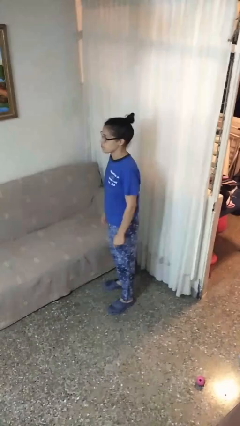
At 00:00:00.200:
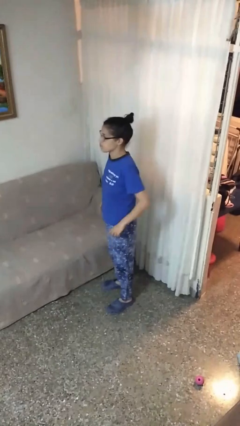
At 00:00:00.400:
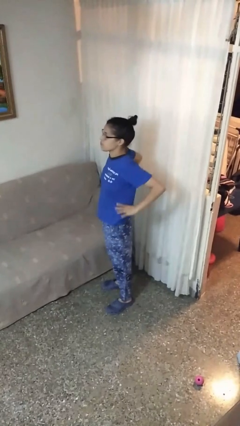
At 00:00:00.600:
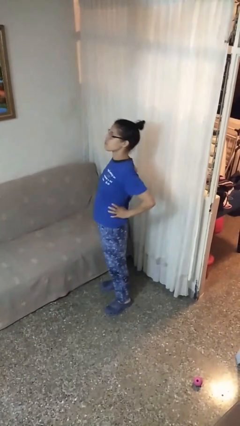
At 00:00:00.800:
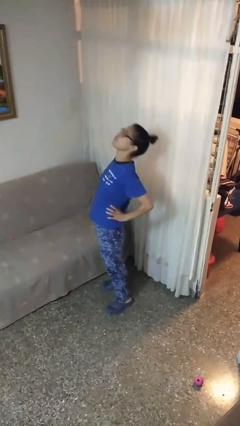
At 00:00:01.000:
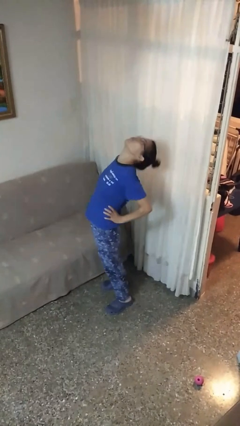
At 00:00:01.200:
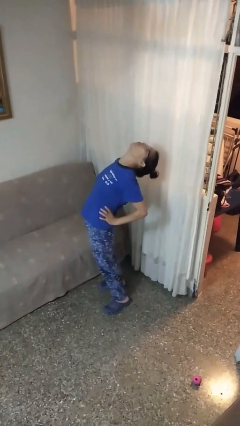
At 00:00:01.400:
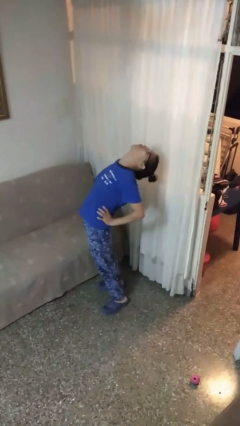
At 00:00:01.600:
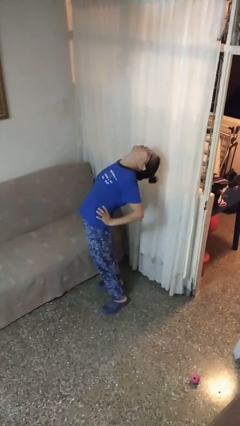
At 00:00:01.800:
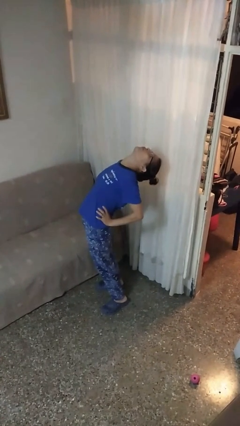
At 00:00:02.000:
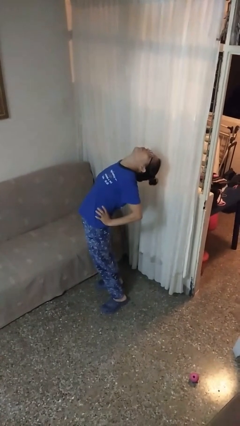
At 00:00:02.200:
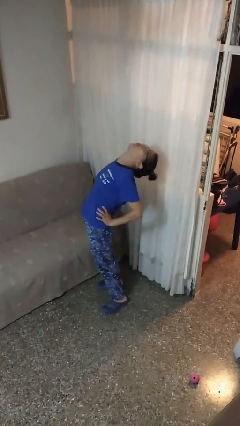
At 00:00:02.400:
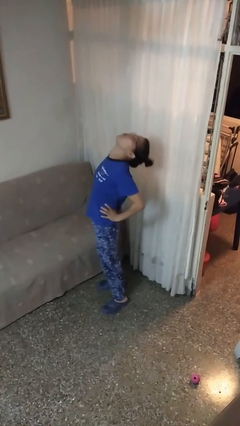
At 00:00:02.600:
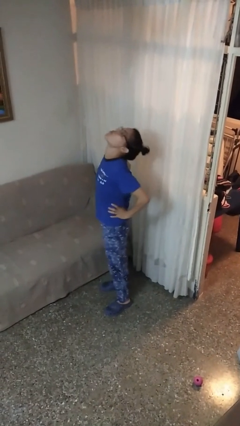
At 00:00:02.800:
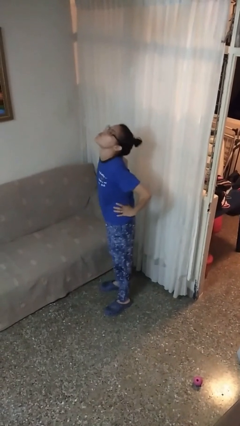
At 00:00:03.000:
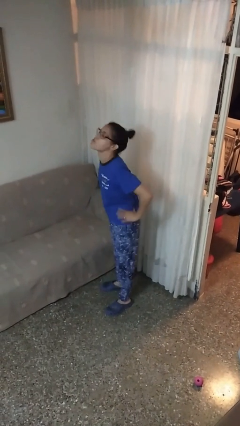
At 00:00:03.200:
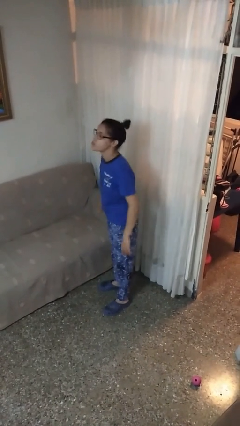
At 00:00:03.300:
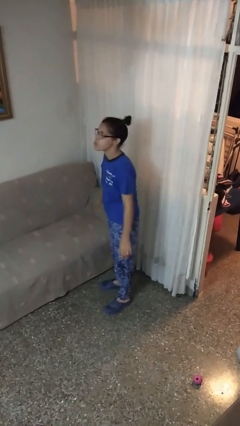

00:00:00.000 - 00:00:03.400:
person stretches back

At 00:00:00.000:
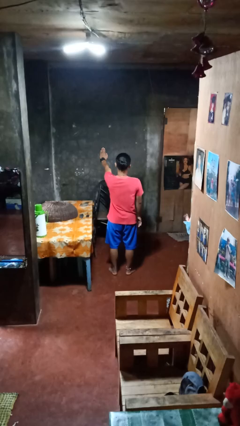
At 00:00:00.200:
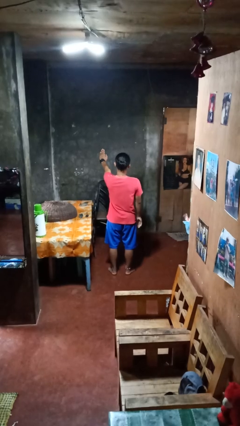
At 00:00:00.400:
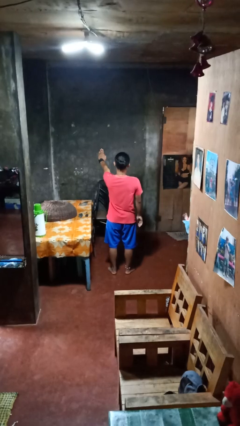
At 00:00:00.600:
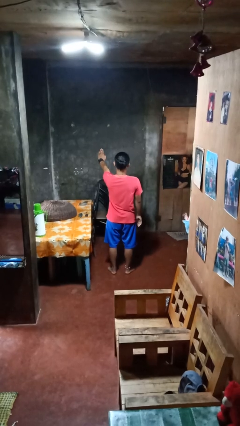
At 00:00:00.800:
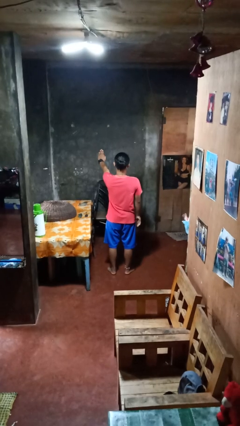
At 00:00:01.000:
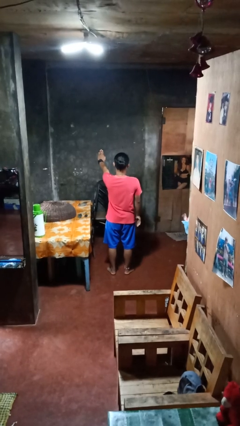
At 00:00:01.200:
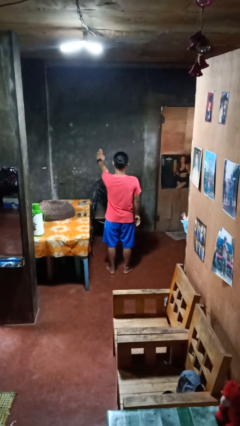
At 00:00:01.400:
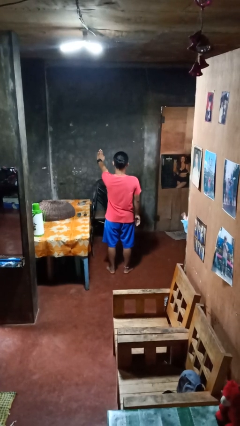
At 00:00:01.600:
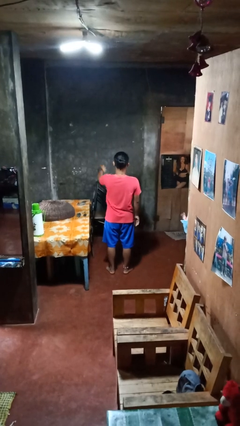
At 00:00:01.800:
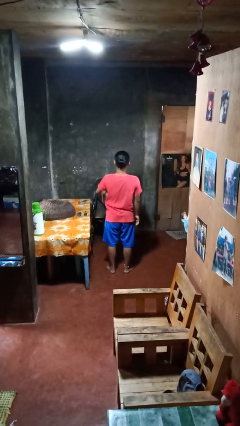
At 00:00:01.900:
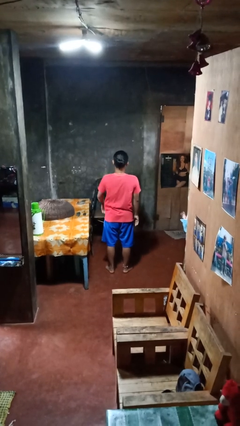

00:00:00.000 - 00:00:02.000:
person gestures stop

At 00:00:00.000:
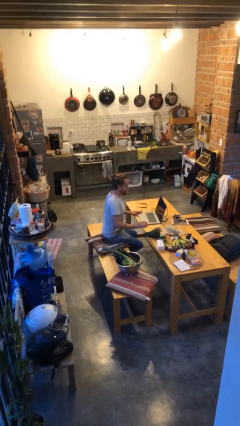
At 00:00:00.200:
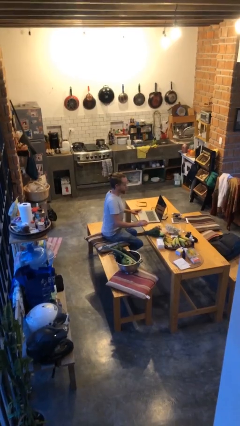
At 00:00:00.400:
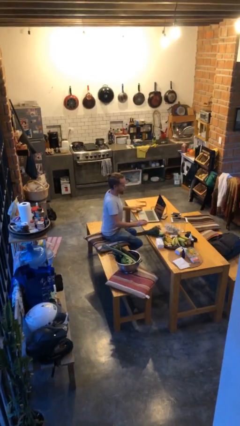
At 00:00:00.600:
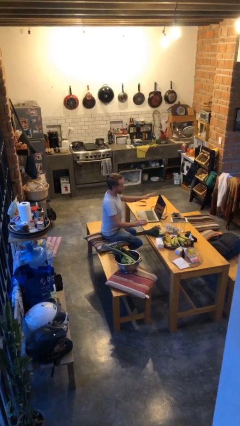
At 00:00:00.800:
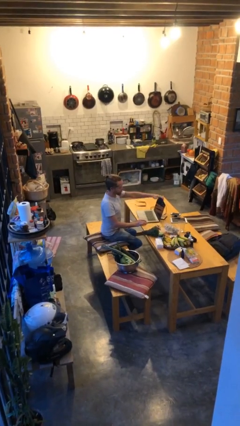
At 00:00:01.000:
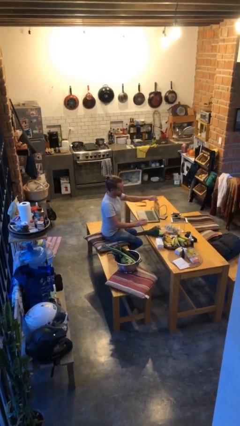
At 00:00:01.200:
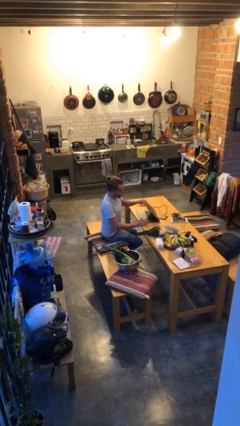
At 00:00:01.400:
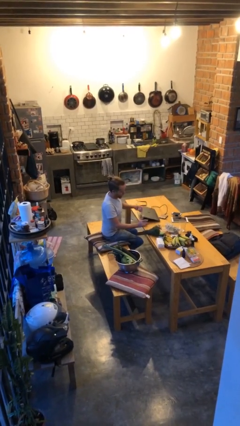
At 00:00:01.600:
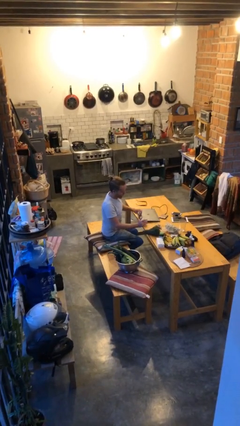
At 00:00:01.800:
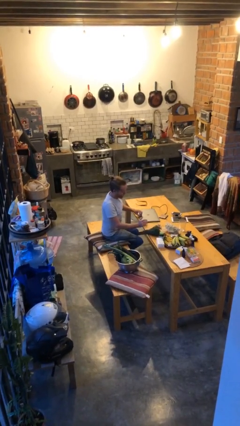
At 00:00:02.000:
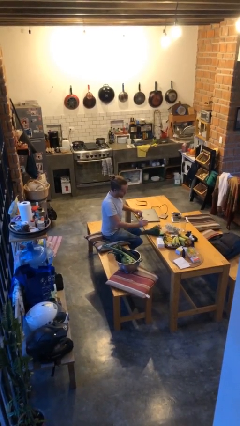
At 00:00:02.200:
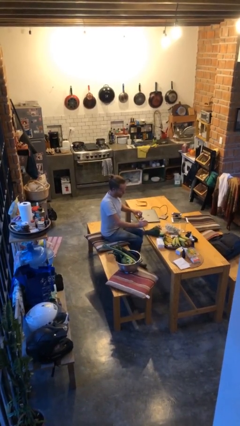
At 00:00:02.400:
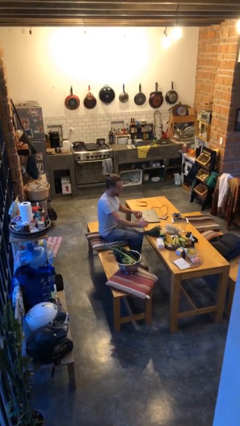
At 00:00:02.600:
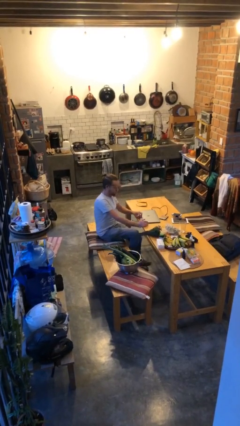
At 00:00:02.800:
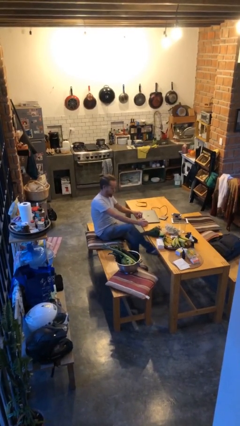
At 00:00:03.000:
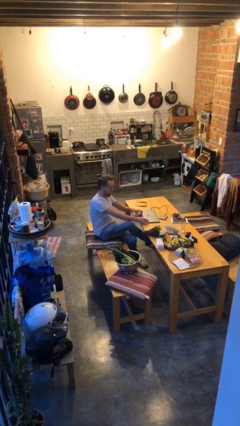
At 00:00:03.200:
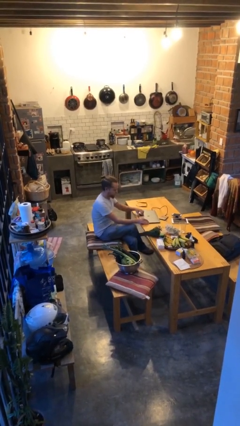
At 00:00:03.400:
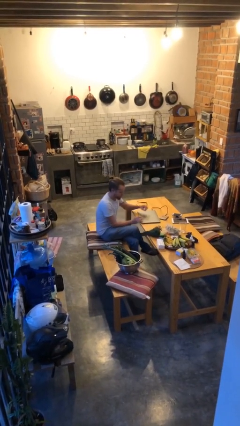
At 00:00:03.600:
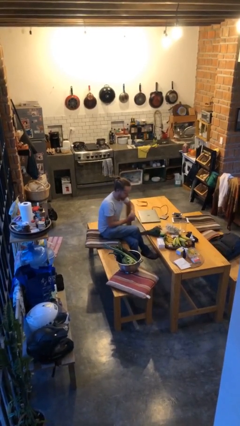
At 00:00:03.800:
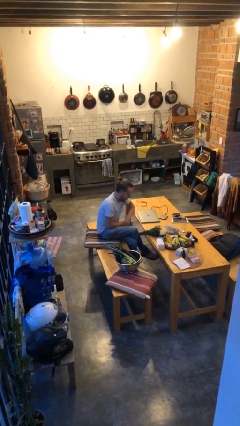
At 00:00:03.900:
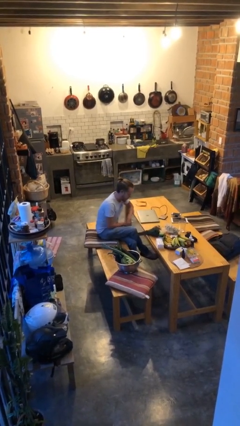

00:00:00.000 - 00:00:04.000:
person closes laptop

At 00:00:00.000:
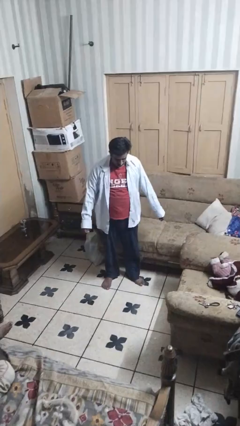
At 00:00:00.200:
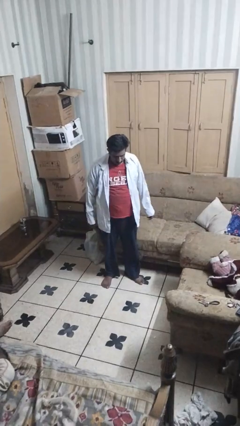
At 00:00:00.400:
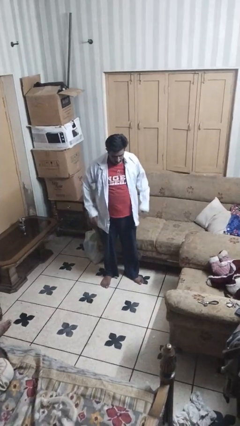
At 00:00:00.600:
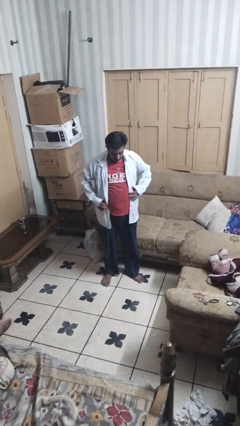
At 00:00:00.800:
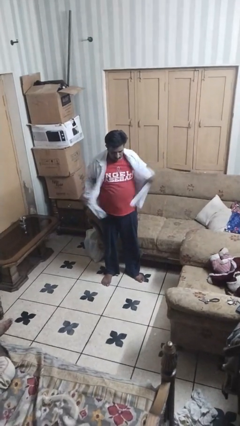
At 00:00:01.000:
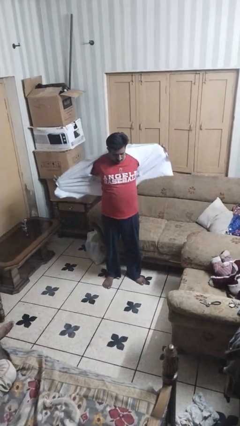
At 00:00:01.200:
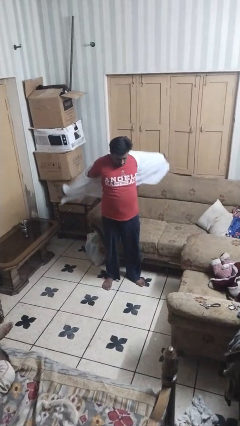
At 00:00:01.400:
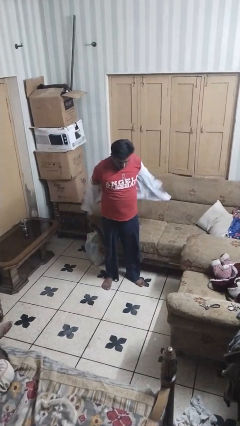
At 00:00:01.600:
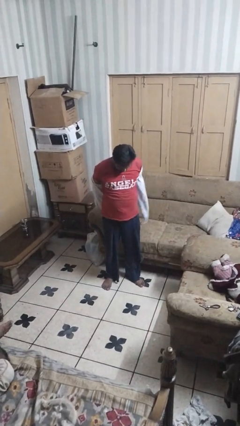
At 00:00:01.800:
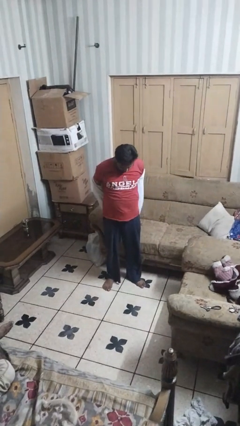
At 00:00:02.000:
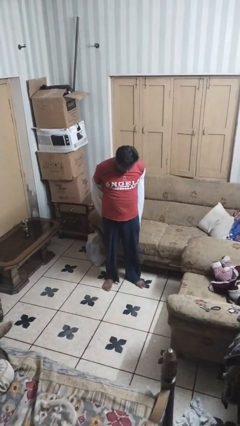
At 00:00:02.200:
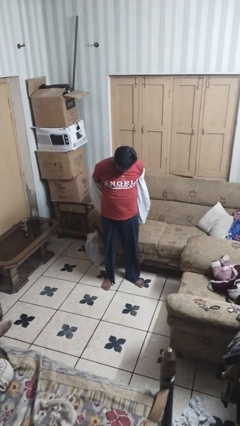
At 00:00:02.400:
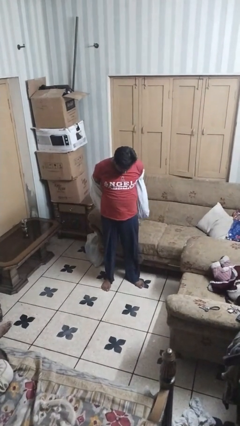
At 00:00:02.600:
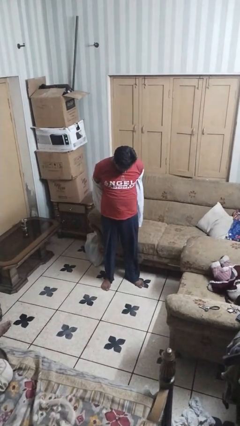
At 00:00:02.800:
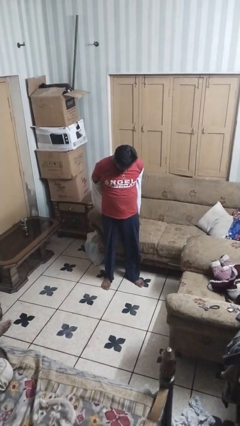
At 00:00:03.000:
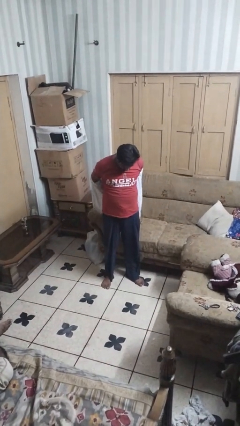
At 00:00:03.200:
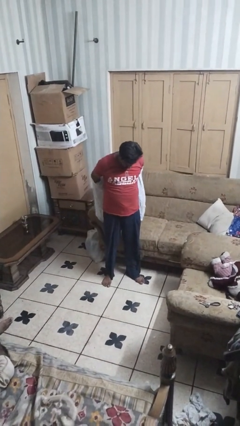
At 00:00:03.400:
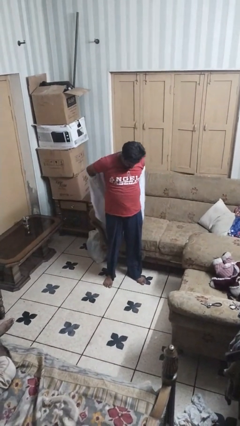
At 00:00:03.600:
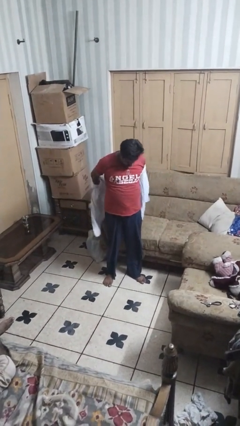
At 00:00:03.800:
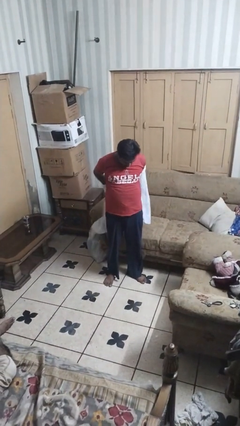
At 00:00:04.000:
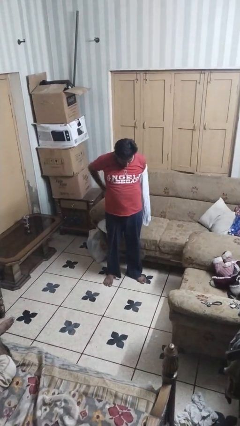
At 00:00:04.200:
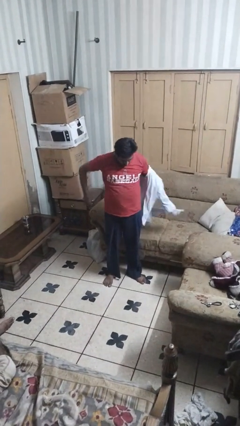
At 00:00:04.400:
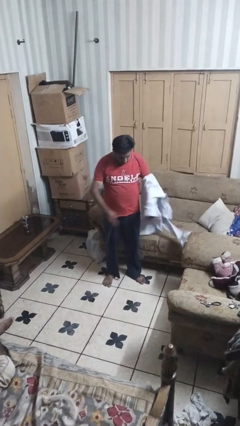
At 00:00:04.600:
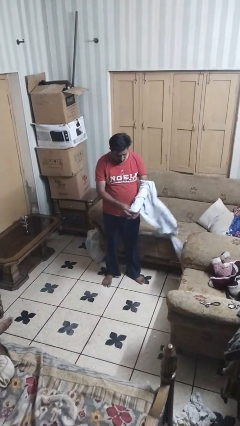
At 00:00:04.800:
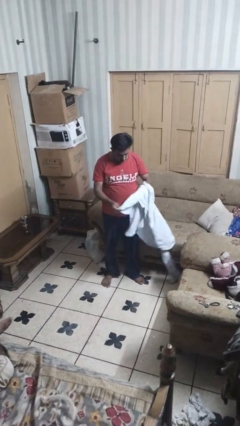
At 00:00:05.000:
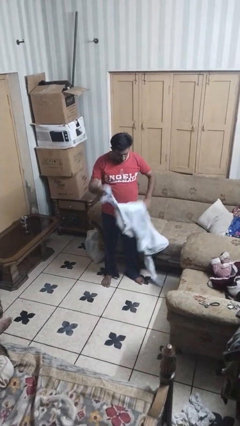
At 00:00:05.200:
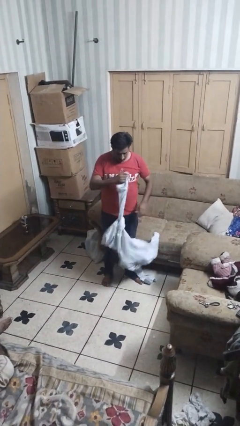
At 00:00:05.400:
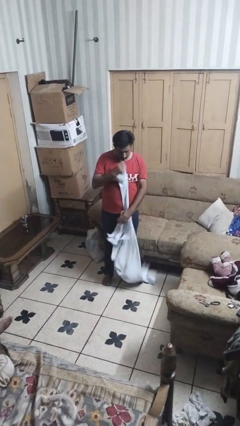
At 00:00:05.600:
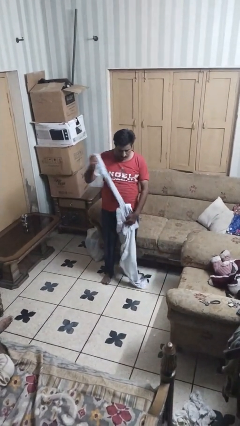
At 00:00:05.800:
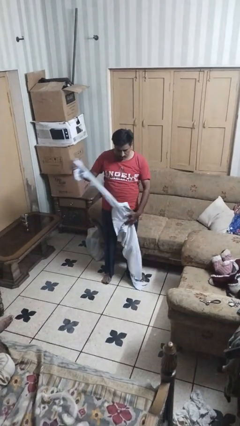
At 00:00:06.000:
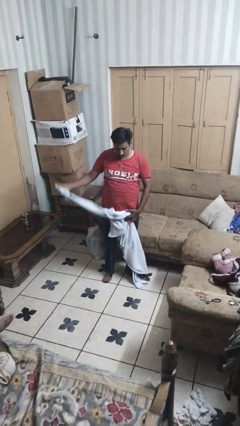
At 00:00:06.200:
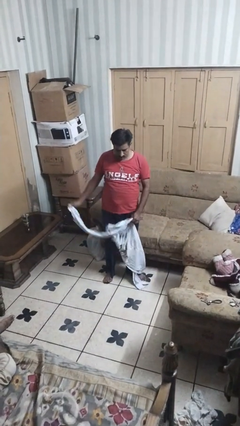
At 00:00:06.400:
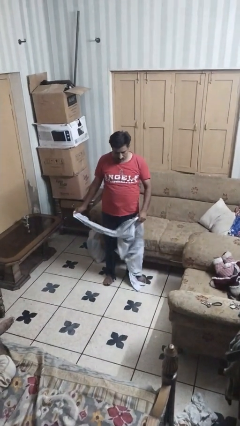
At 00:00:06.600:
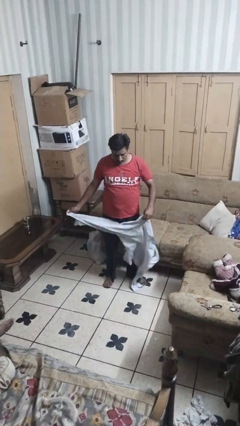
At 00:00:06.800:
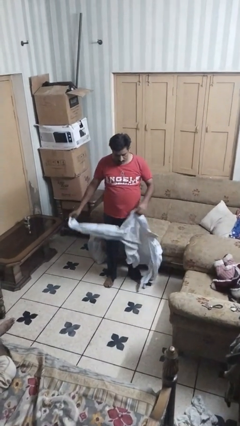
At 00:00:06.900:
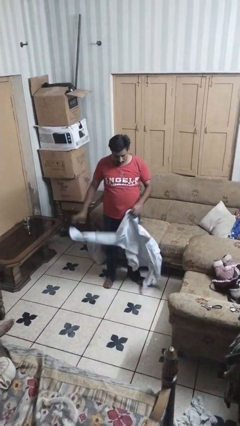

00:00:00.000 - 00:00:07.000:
person takes off shirt

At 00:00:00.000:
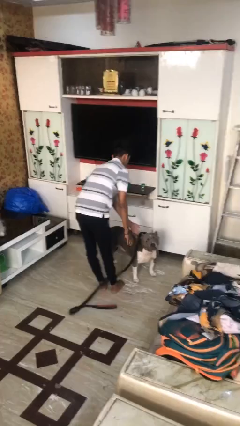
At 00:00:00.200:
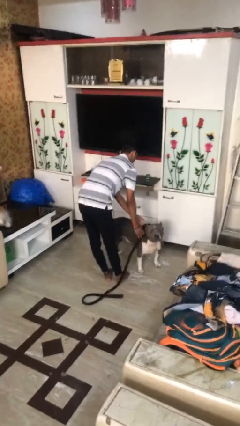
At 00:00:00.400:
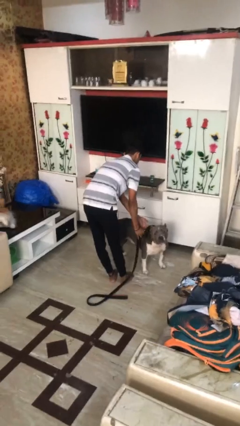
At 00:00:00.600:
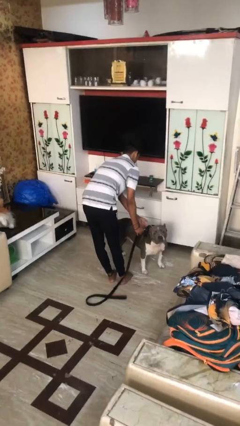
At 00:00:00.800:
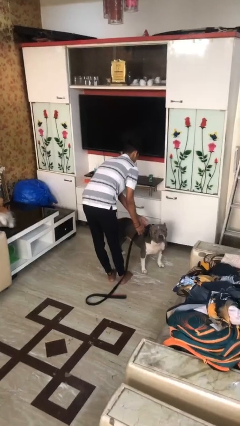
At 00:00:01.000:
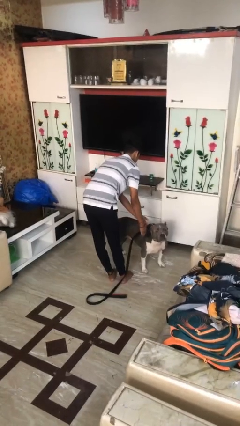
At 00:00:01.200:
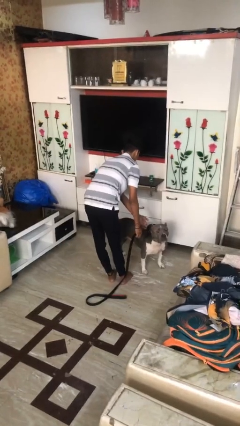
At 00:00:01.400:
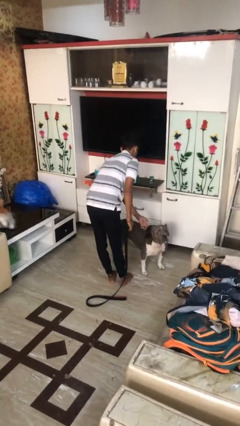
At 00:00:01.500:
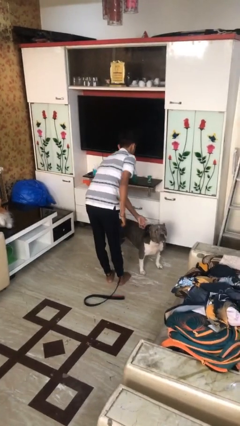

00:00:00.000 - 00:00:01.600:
person unattaches leash from dog
